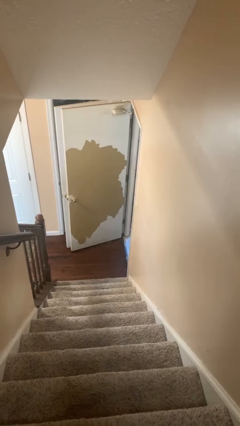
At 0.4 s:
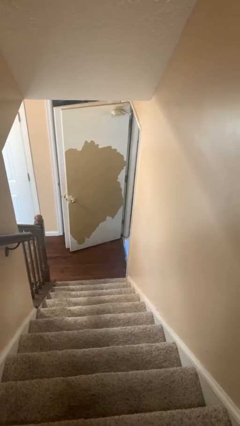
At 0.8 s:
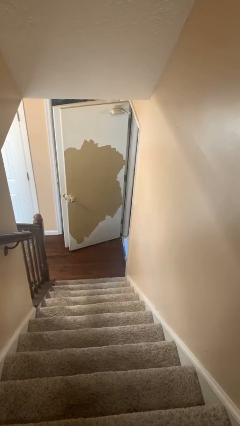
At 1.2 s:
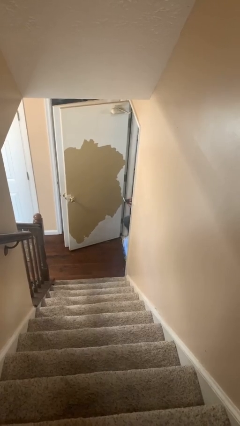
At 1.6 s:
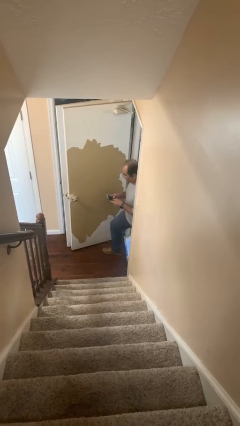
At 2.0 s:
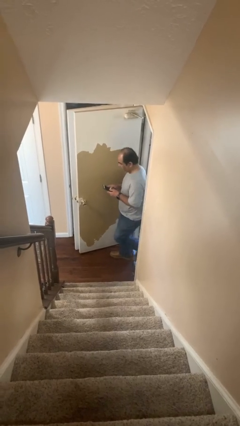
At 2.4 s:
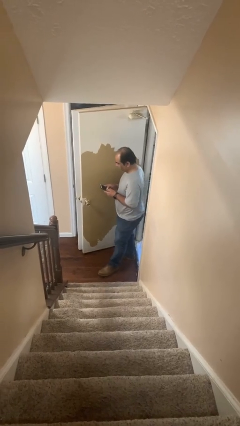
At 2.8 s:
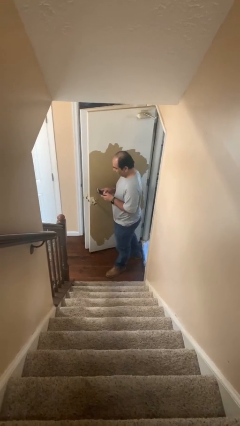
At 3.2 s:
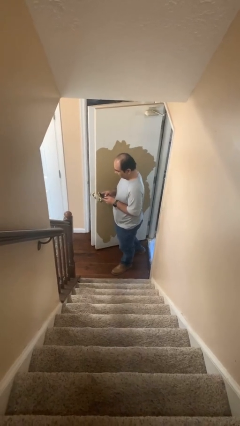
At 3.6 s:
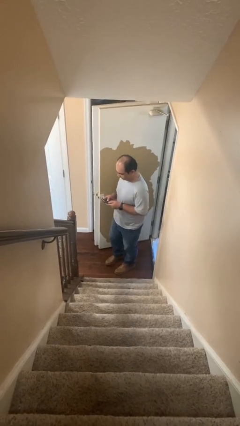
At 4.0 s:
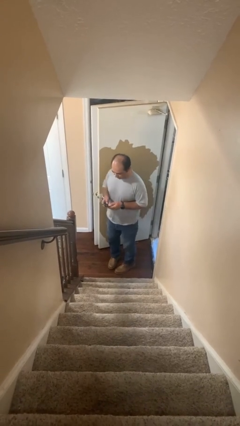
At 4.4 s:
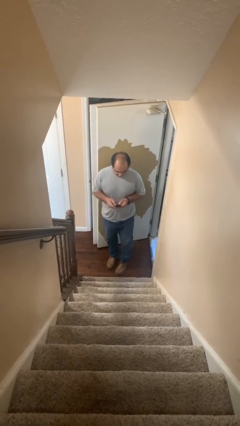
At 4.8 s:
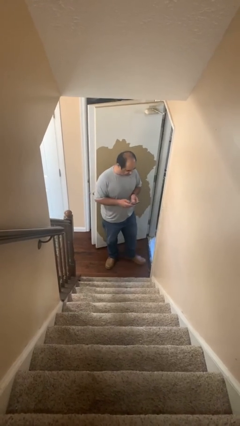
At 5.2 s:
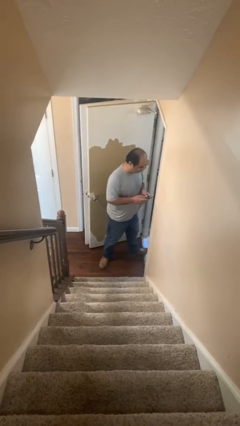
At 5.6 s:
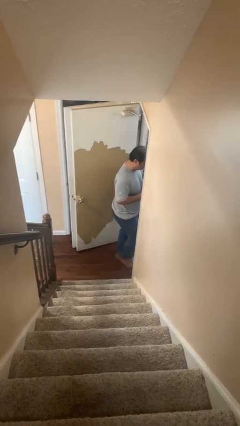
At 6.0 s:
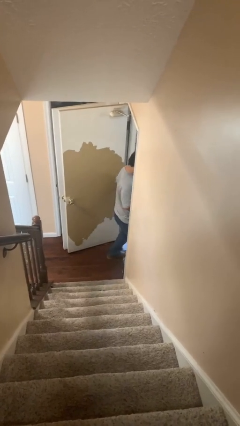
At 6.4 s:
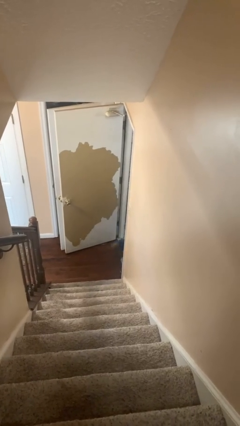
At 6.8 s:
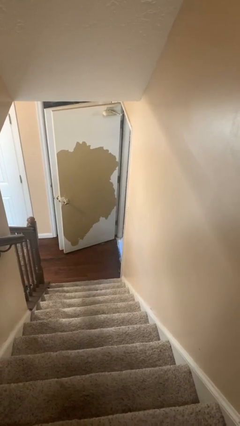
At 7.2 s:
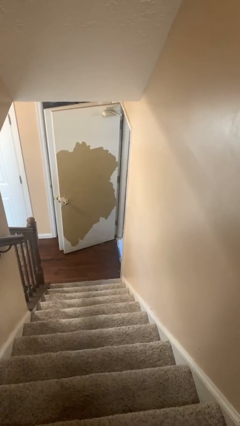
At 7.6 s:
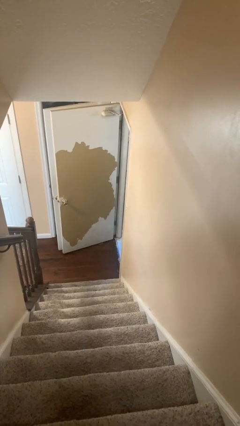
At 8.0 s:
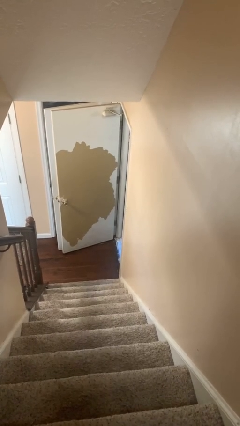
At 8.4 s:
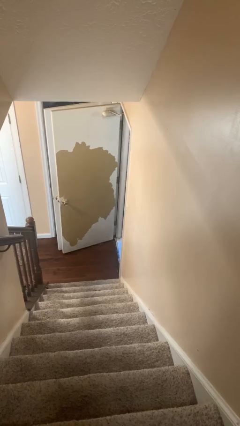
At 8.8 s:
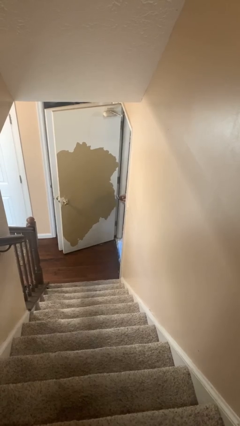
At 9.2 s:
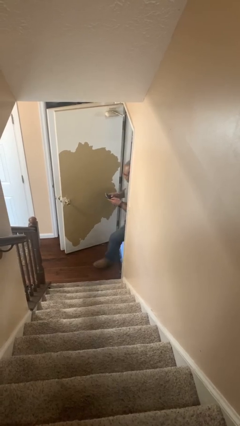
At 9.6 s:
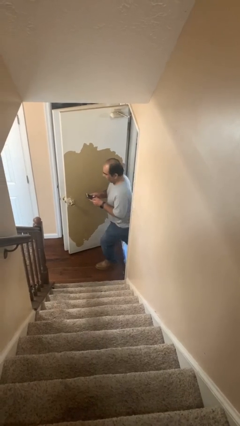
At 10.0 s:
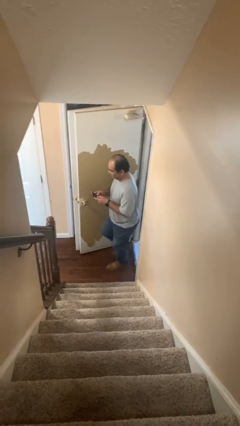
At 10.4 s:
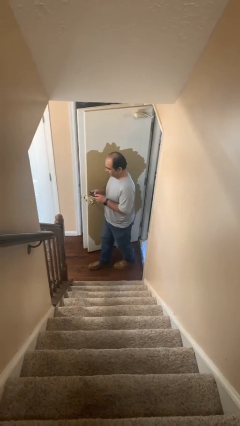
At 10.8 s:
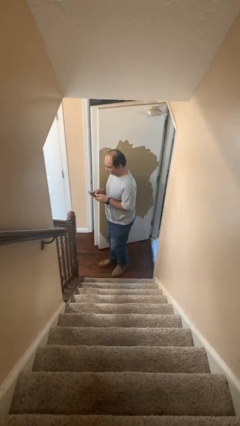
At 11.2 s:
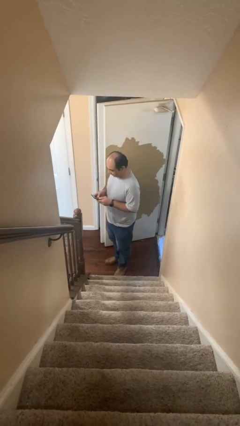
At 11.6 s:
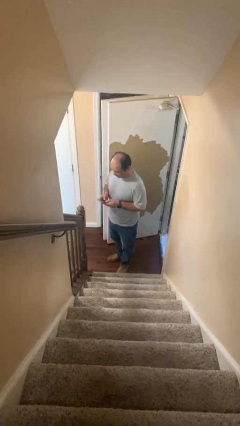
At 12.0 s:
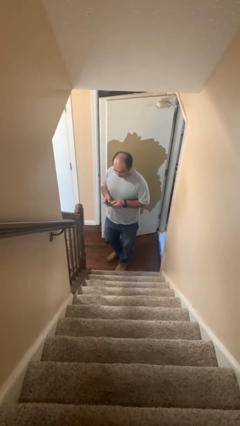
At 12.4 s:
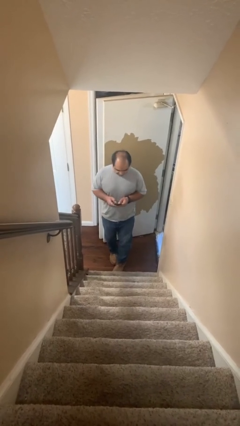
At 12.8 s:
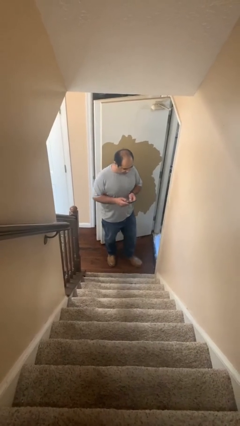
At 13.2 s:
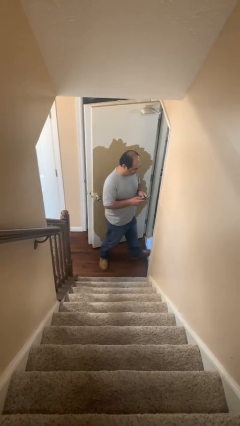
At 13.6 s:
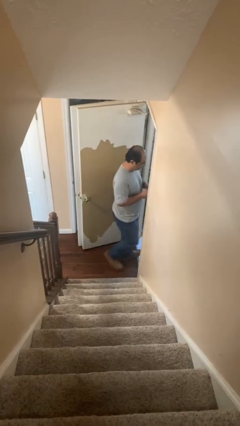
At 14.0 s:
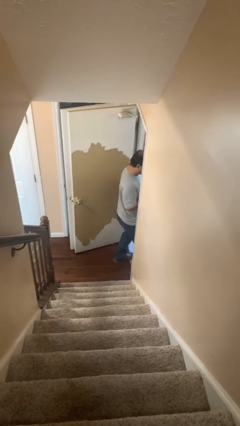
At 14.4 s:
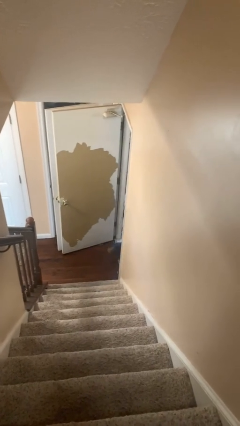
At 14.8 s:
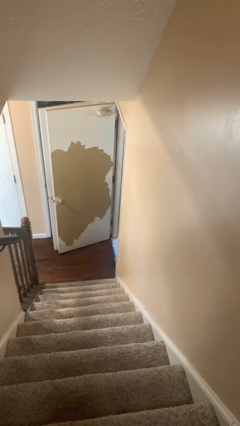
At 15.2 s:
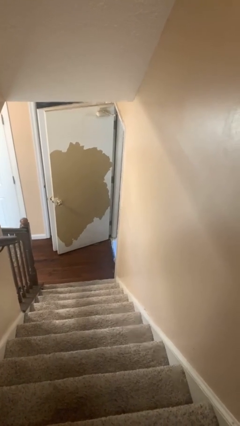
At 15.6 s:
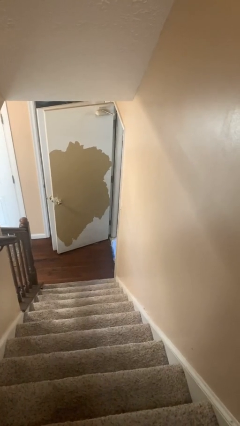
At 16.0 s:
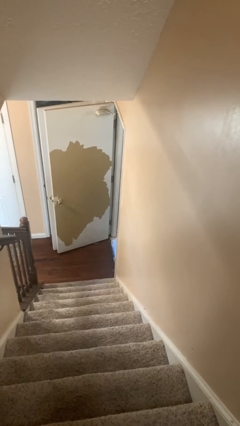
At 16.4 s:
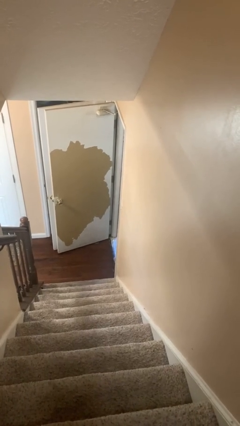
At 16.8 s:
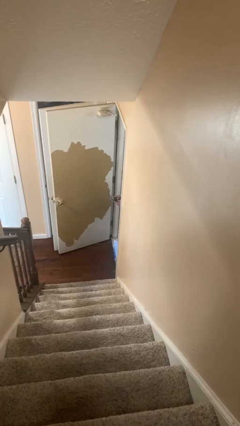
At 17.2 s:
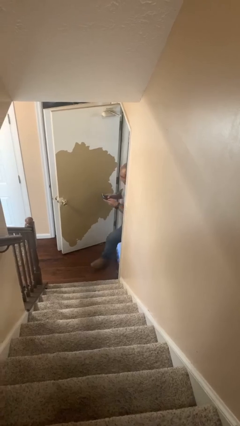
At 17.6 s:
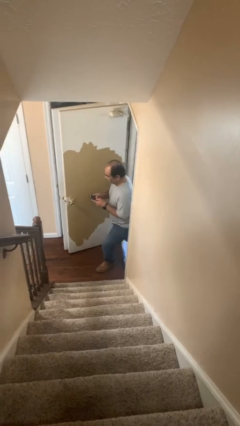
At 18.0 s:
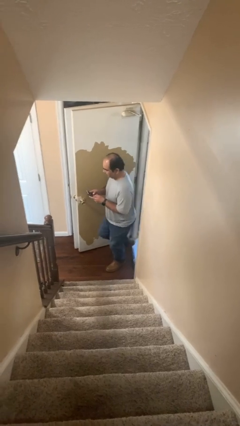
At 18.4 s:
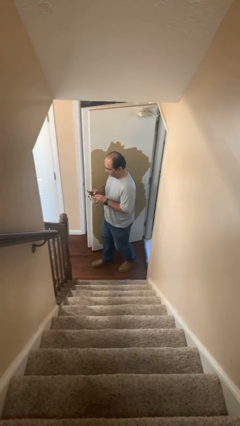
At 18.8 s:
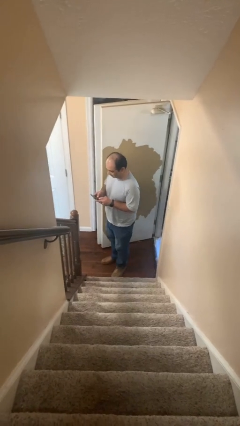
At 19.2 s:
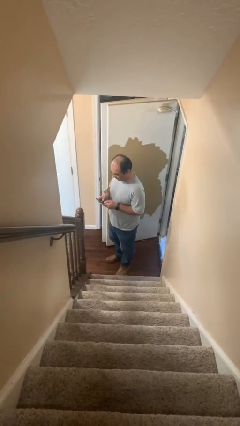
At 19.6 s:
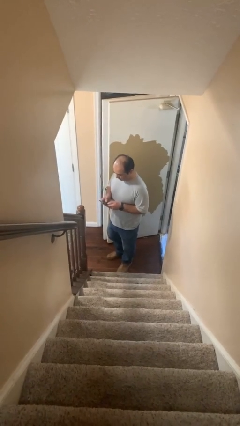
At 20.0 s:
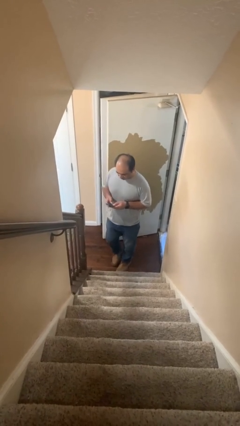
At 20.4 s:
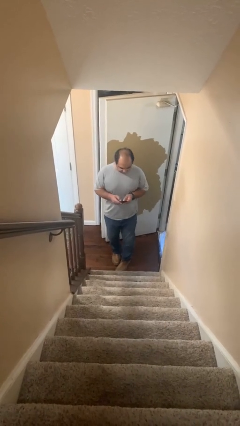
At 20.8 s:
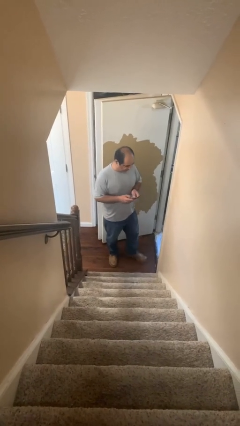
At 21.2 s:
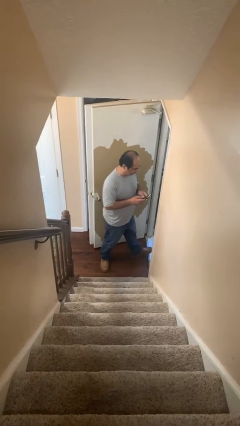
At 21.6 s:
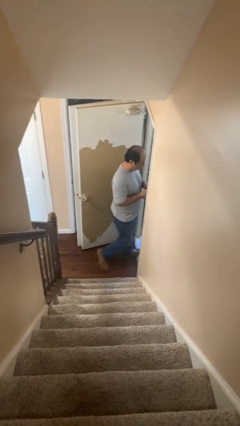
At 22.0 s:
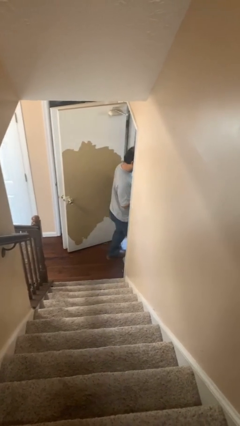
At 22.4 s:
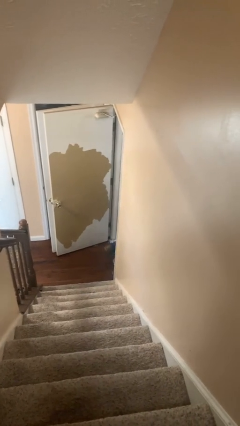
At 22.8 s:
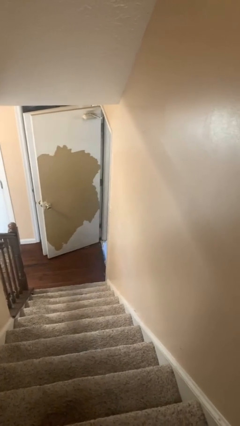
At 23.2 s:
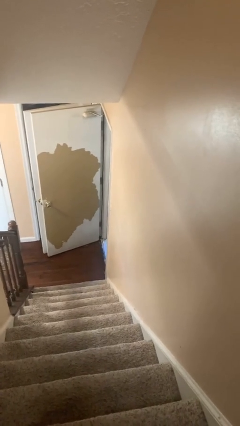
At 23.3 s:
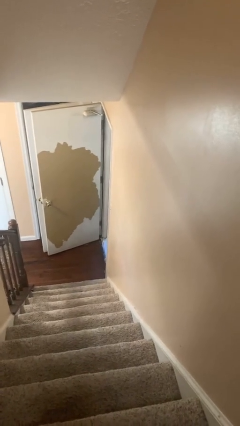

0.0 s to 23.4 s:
person texts on phone

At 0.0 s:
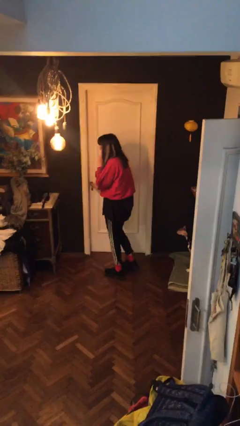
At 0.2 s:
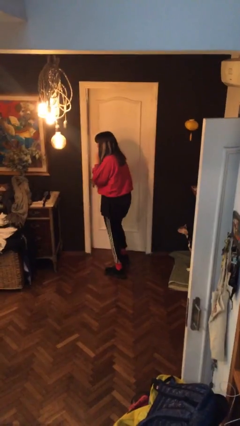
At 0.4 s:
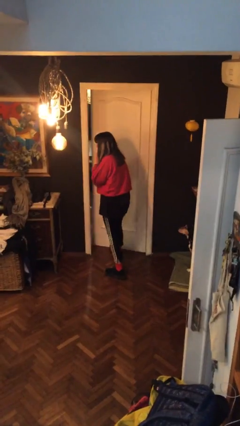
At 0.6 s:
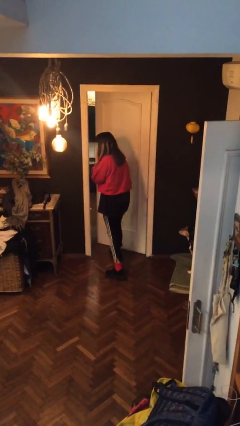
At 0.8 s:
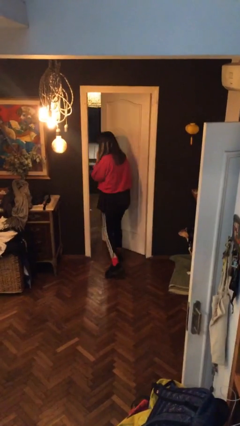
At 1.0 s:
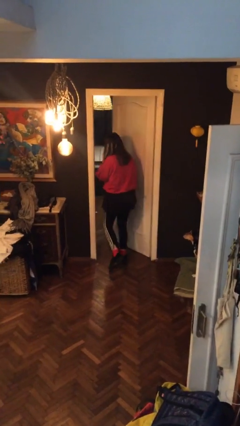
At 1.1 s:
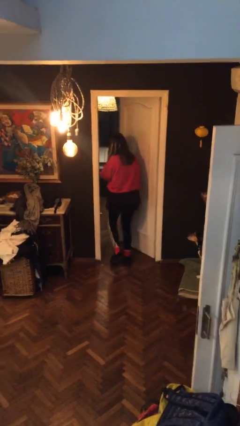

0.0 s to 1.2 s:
person opens facility door

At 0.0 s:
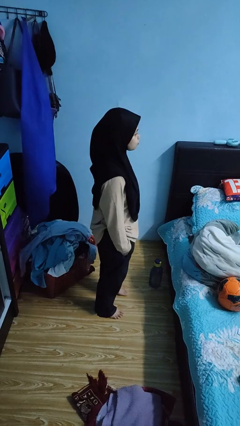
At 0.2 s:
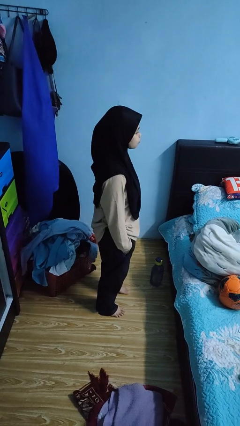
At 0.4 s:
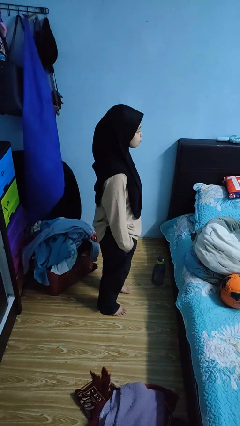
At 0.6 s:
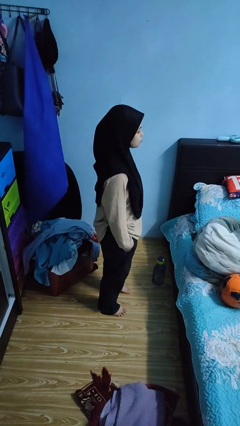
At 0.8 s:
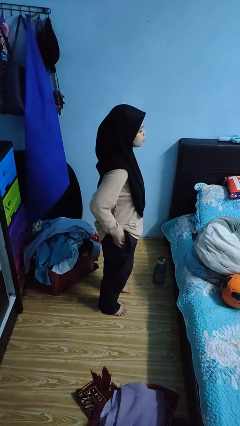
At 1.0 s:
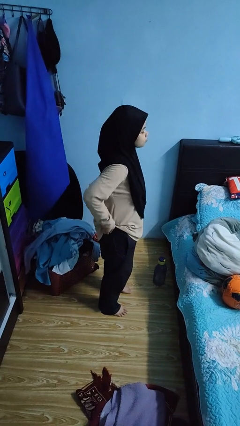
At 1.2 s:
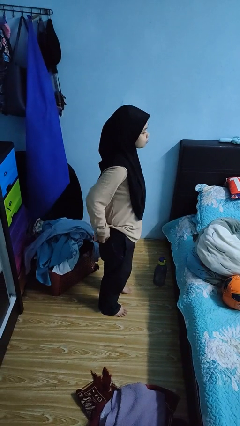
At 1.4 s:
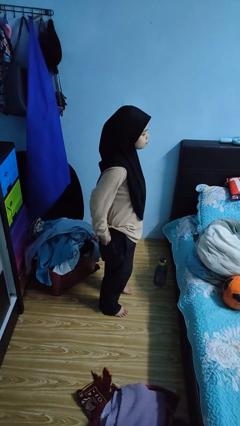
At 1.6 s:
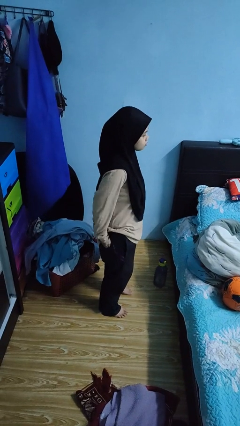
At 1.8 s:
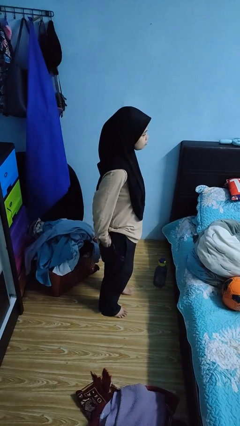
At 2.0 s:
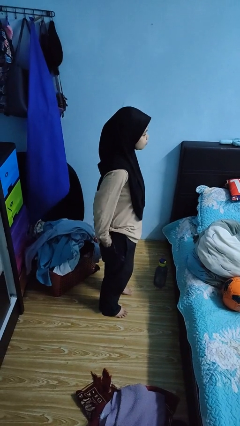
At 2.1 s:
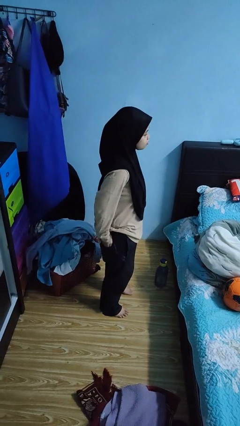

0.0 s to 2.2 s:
person puts hands in back pockets

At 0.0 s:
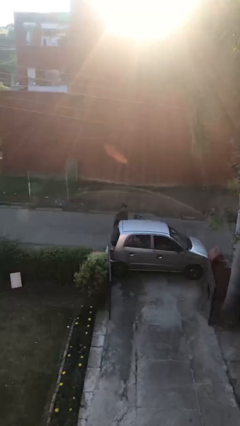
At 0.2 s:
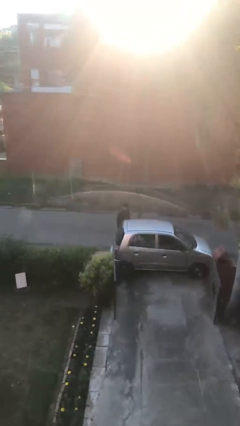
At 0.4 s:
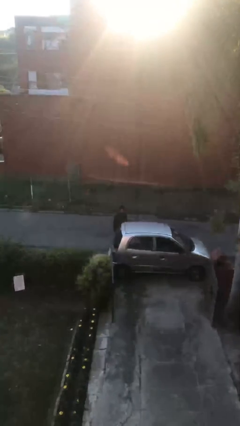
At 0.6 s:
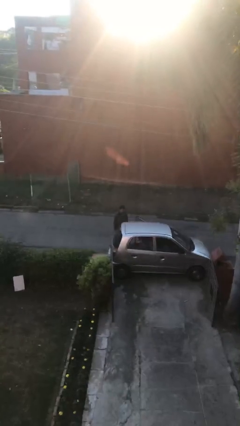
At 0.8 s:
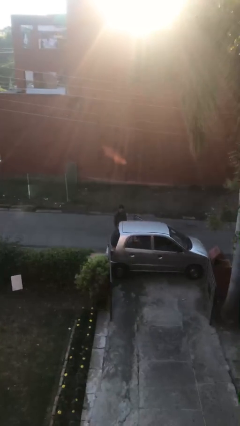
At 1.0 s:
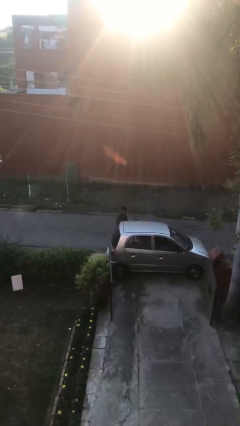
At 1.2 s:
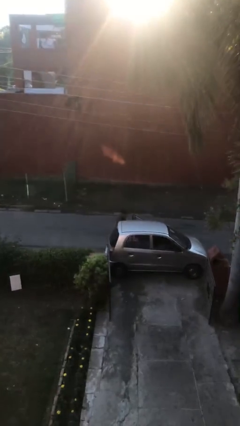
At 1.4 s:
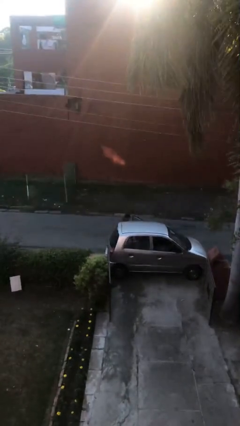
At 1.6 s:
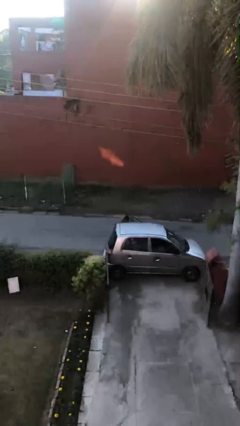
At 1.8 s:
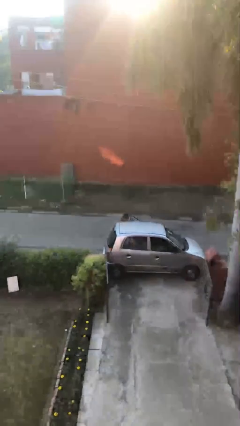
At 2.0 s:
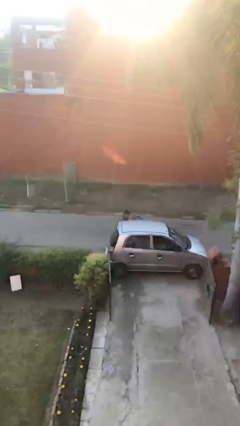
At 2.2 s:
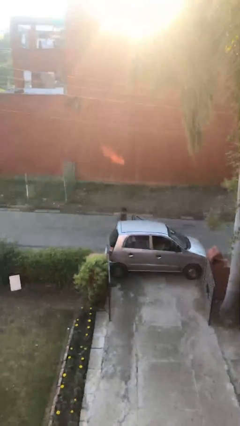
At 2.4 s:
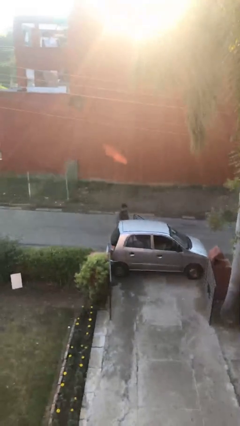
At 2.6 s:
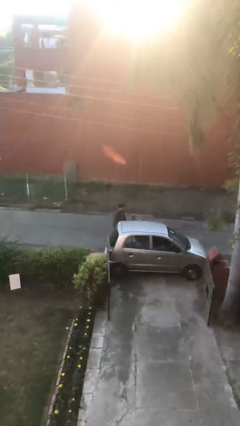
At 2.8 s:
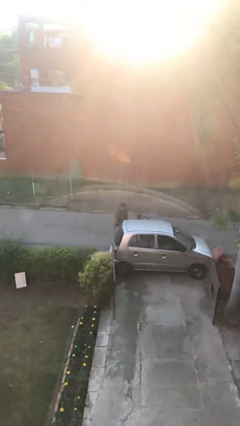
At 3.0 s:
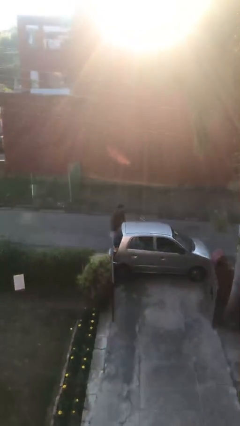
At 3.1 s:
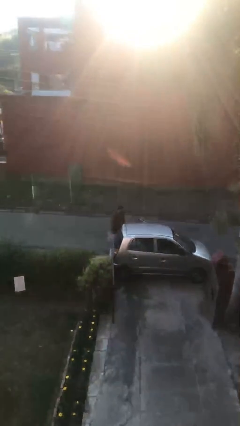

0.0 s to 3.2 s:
person unloads car
